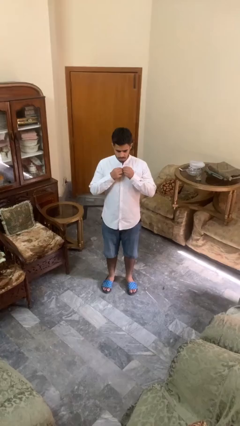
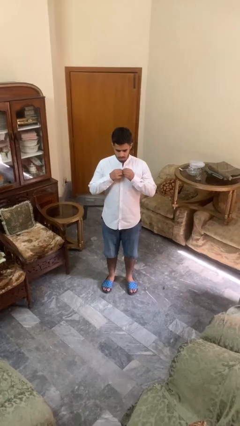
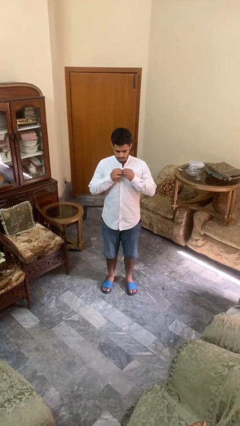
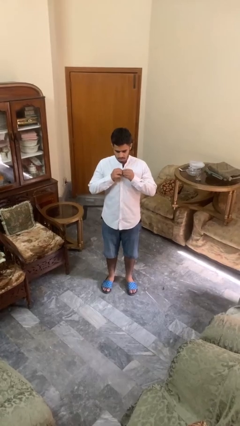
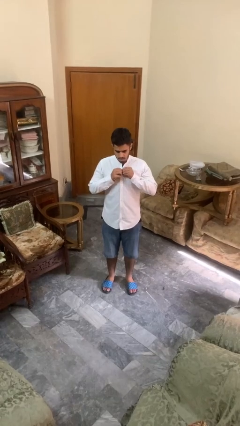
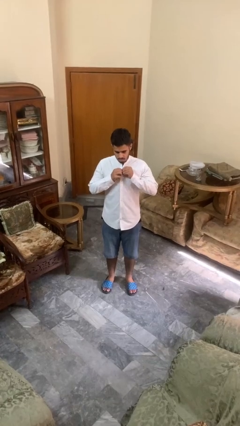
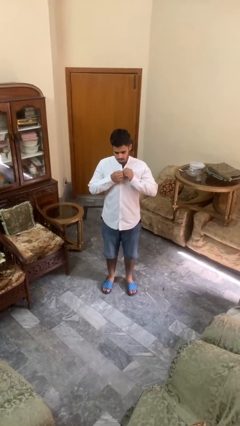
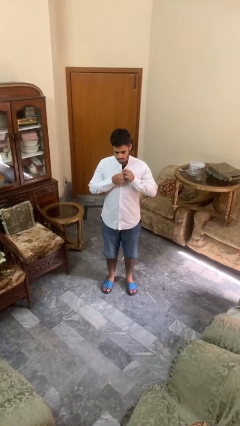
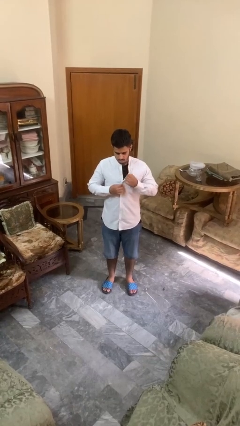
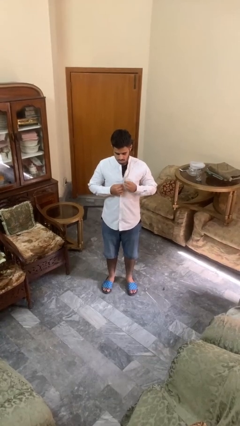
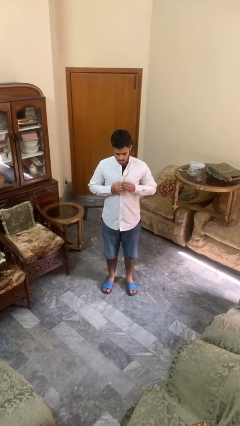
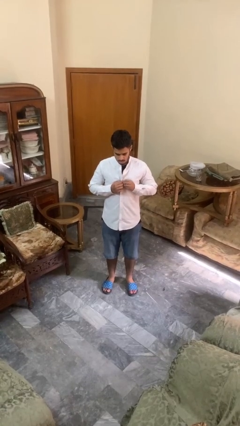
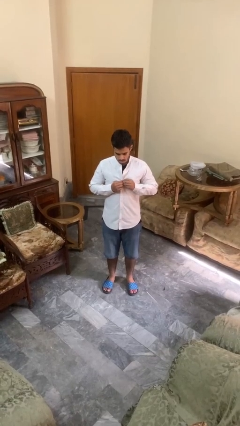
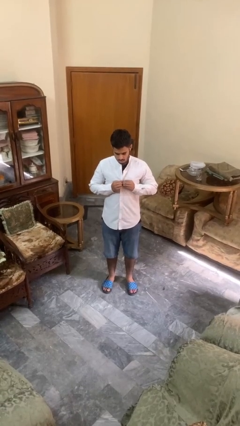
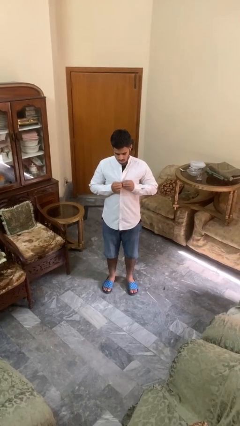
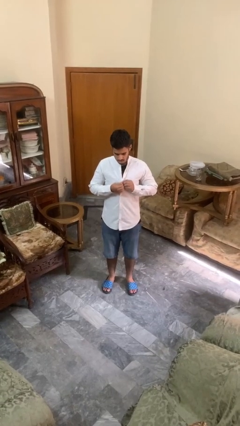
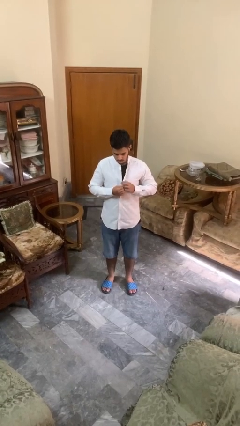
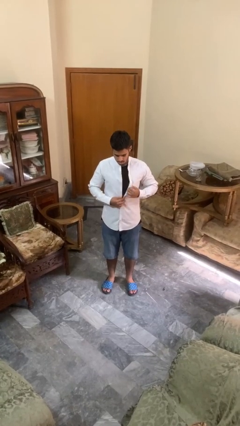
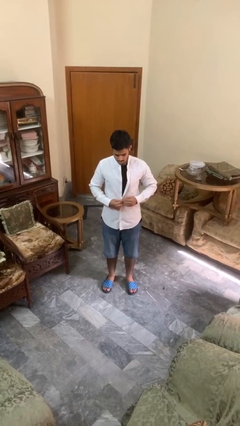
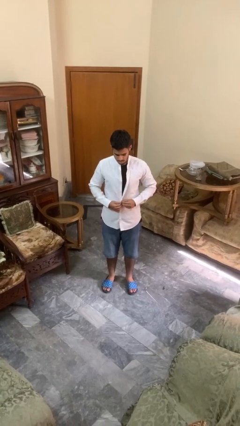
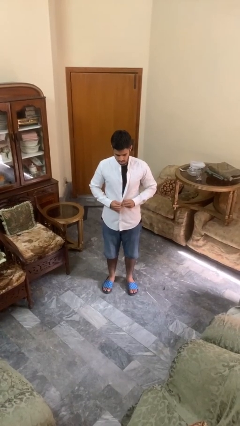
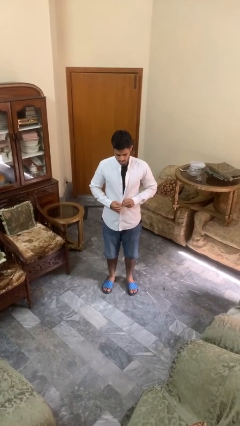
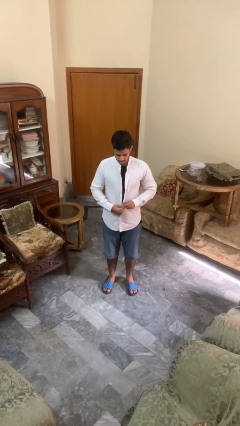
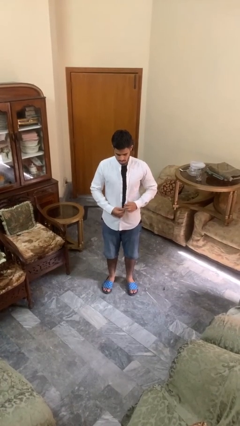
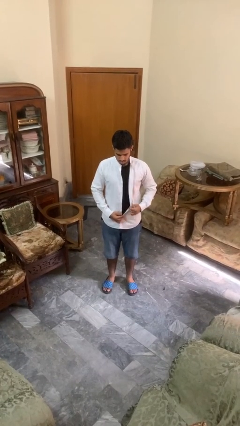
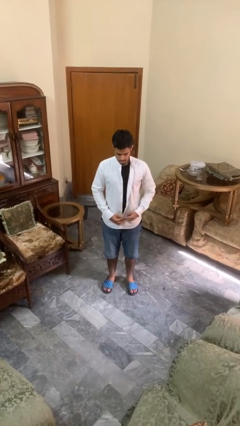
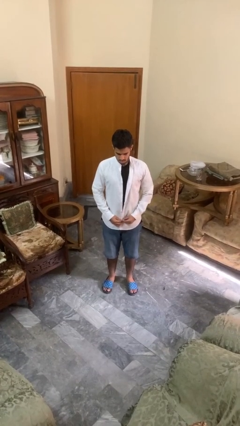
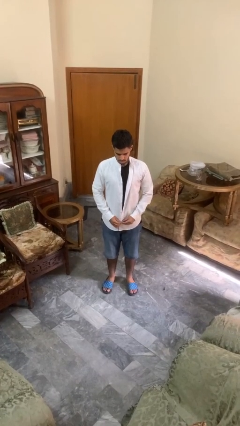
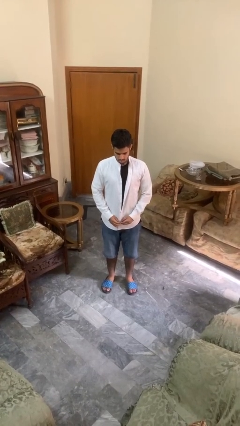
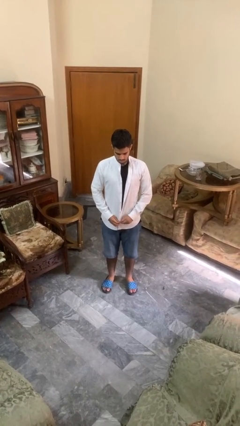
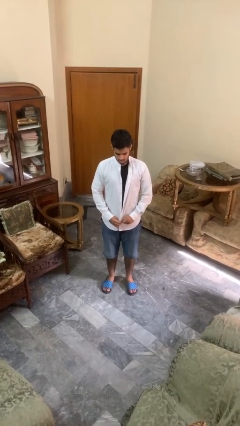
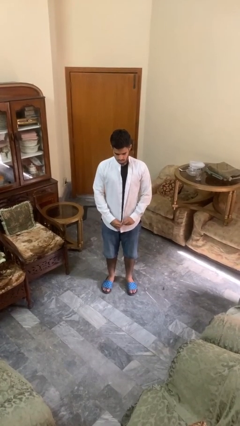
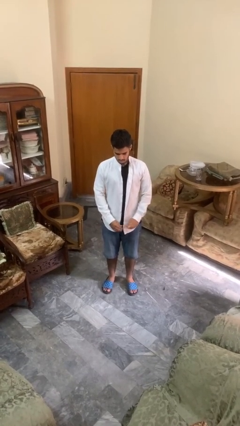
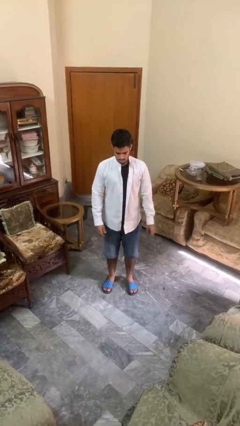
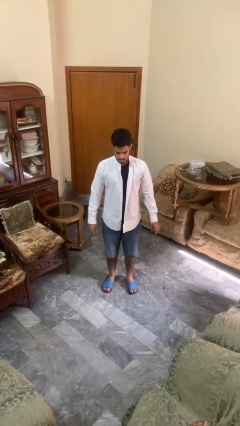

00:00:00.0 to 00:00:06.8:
person unbuttons shirt

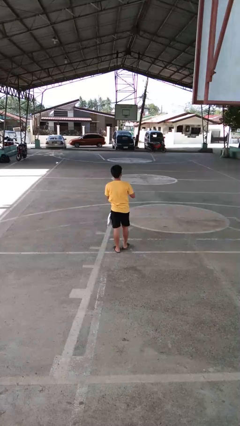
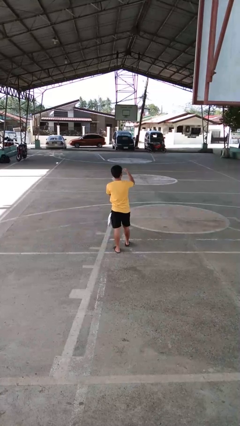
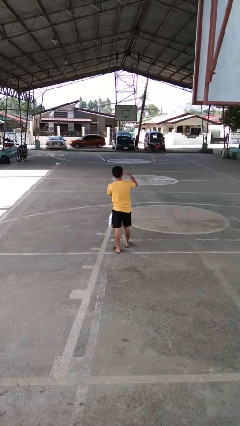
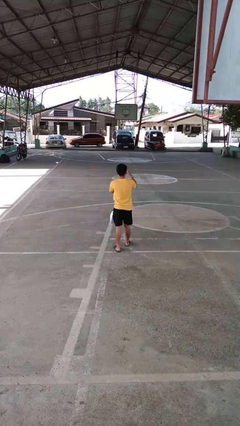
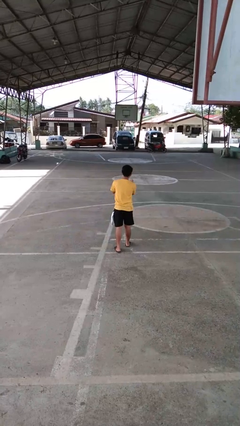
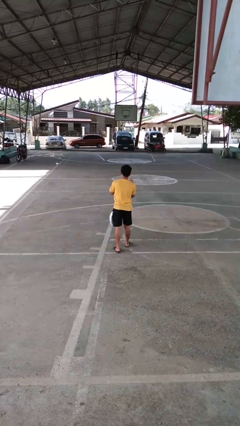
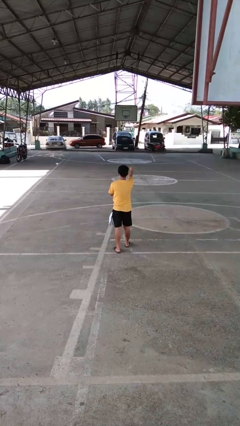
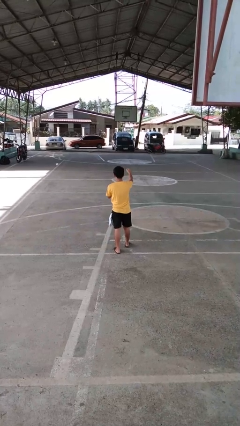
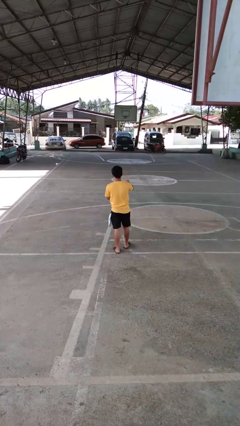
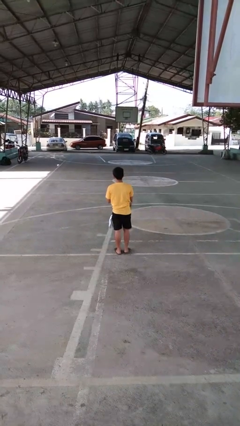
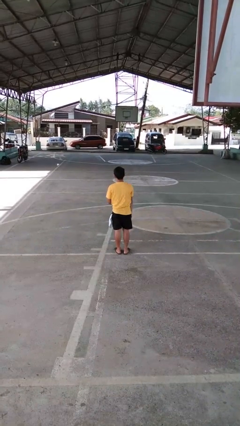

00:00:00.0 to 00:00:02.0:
person punches

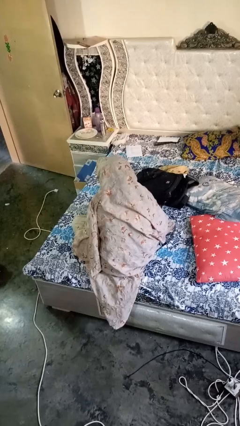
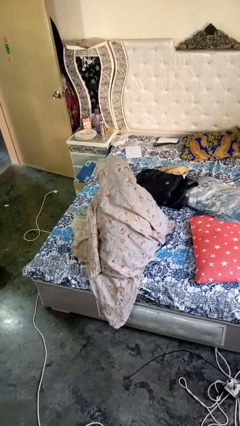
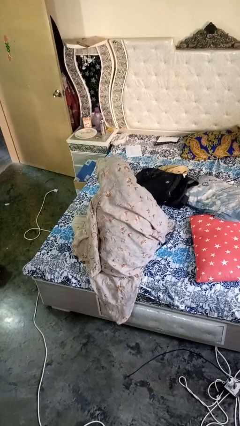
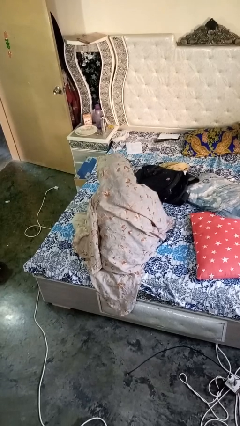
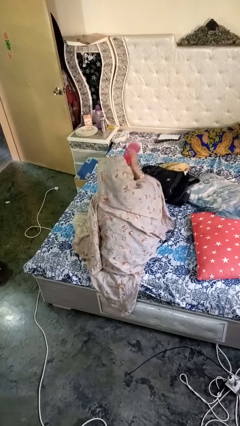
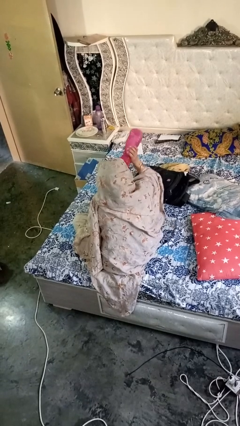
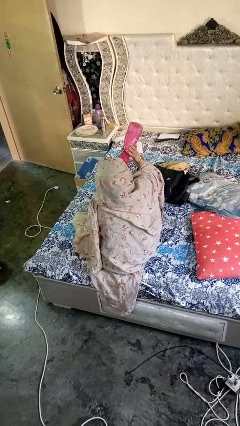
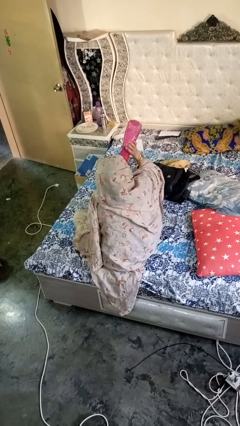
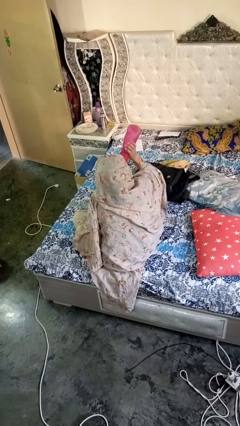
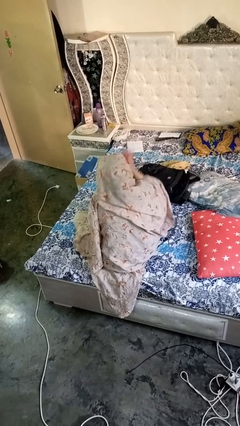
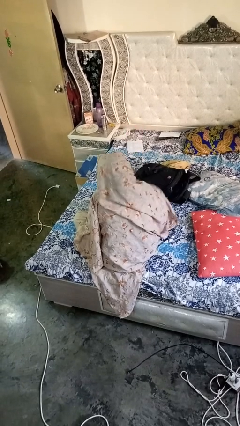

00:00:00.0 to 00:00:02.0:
person drinks from bottle

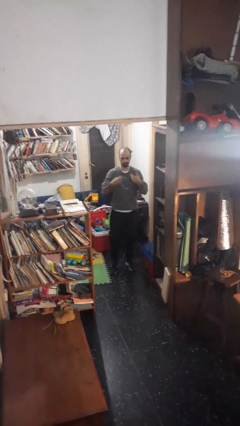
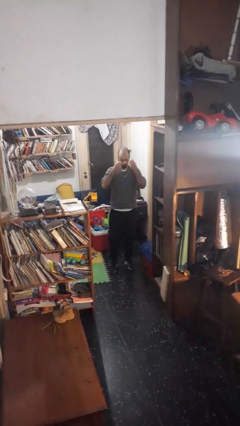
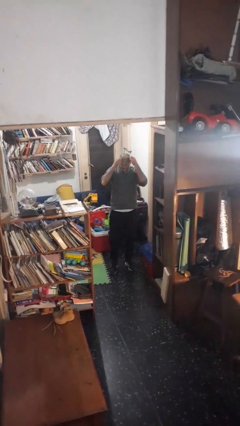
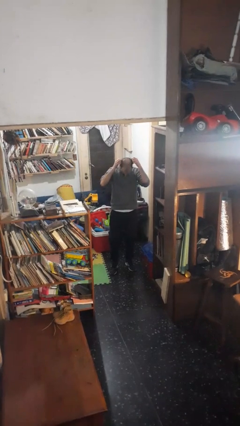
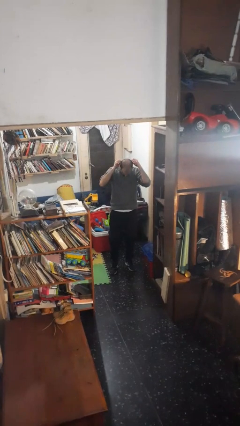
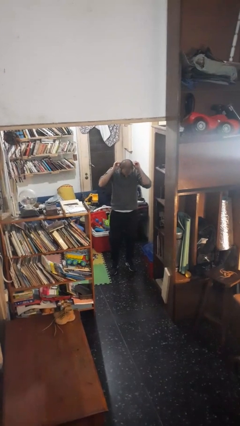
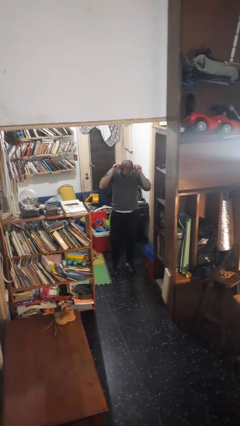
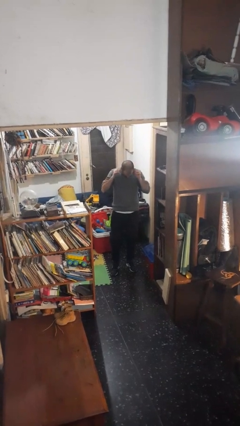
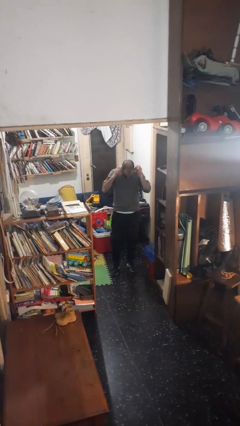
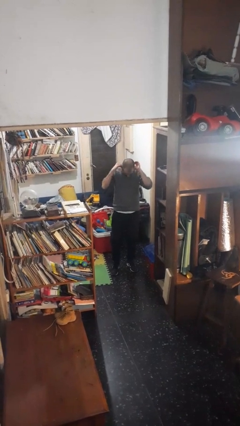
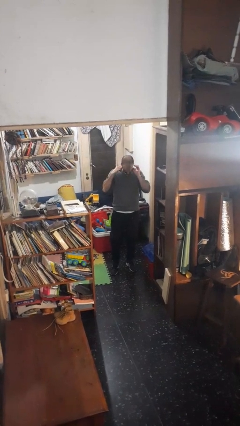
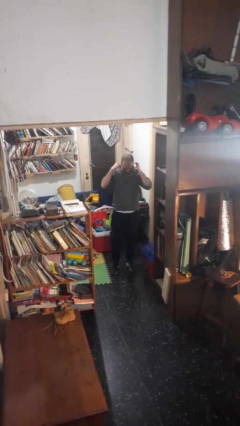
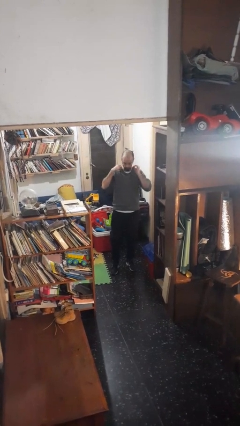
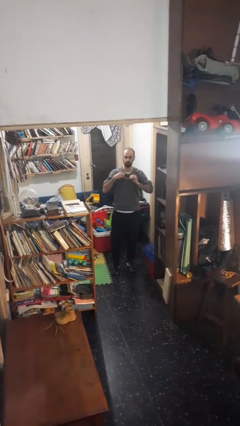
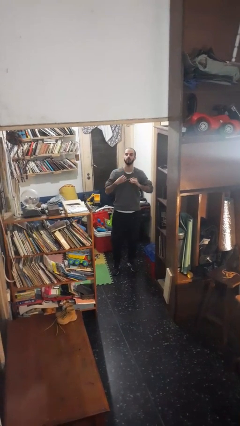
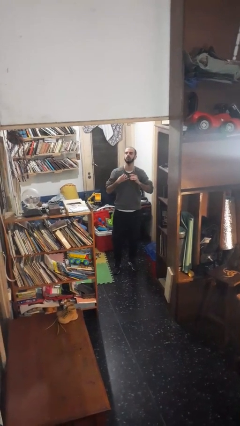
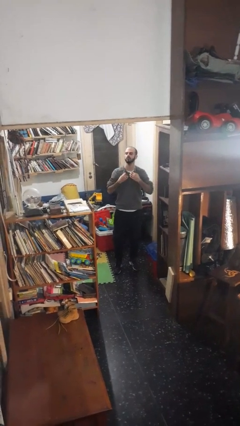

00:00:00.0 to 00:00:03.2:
person puts on necklace

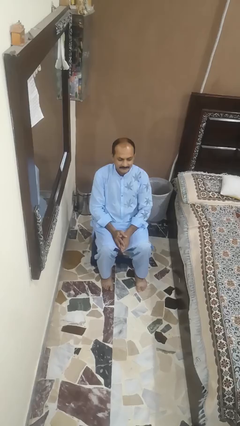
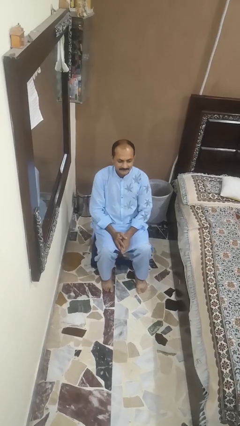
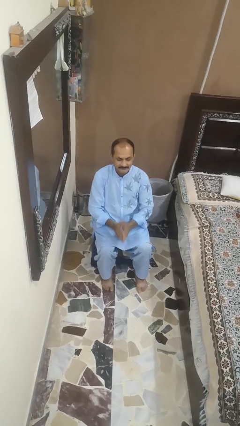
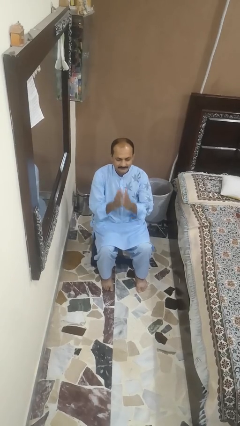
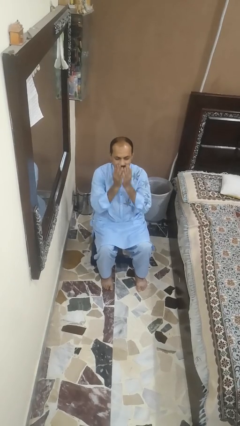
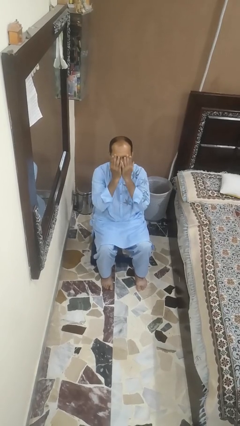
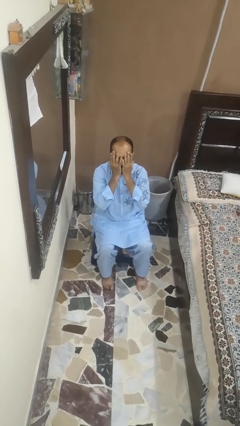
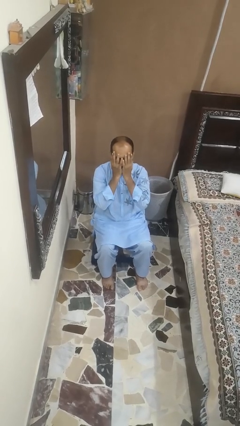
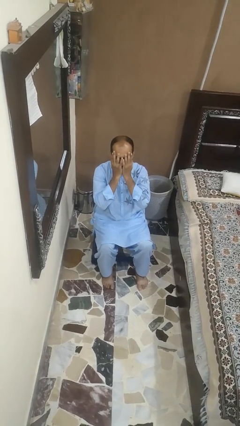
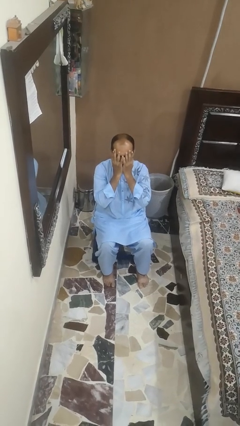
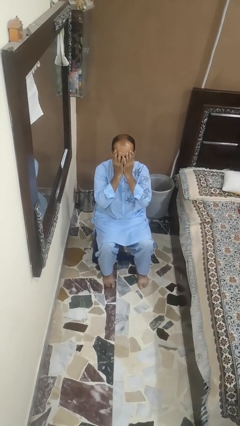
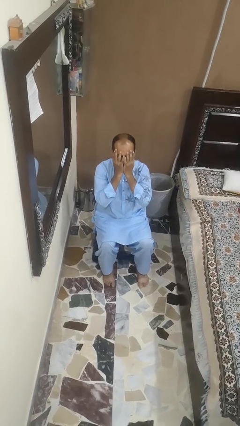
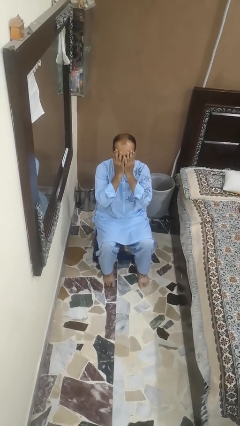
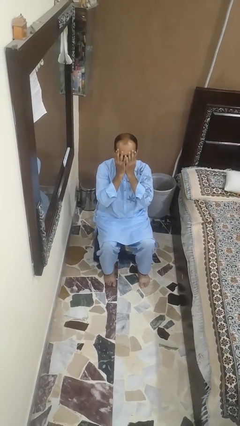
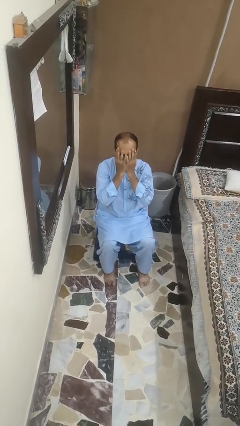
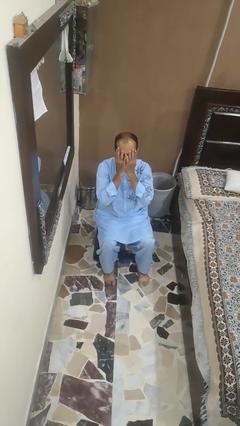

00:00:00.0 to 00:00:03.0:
person covers face with hands

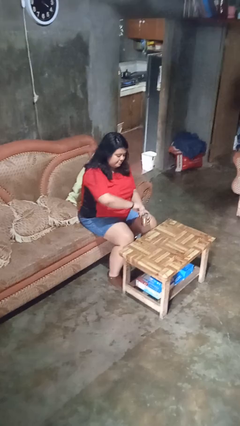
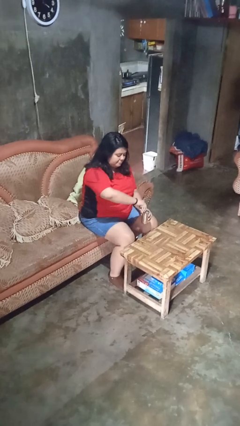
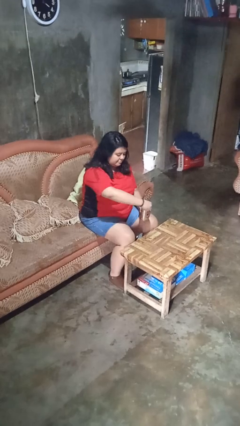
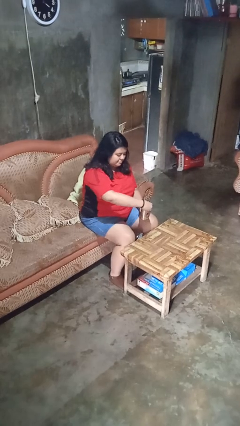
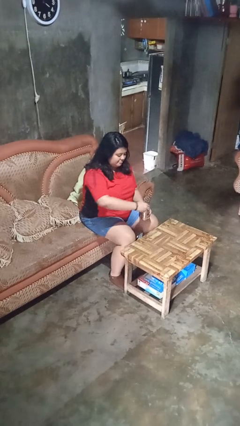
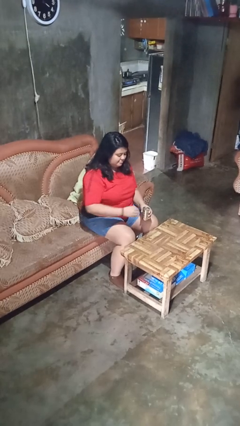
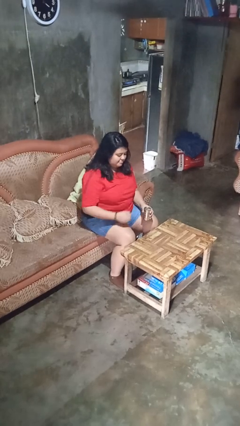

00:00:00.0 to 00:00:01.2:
person opens beverage can
